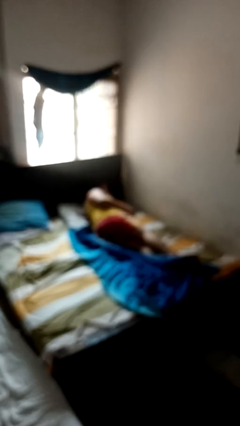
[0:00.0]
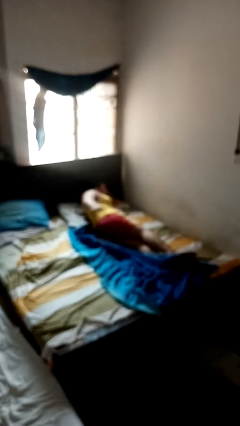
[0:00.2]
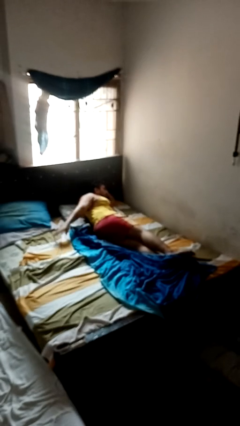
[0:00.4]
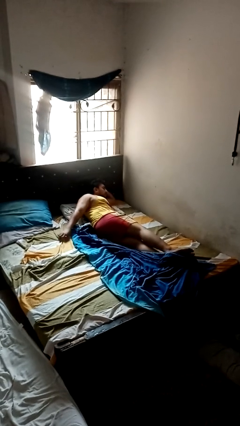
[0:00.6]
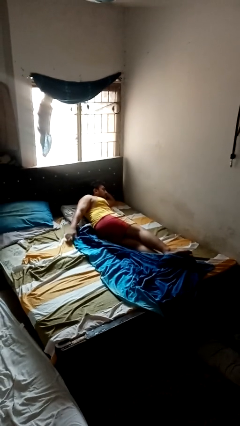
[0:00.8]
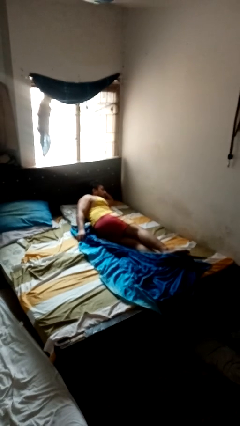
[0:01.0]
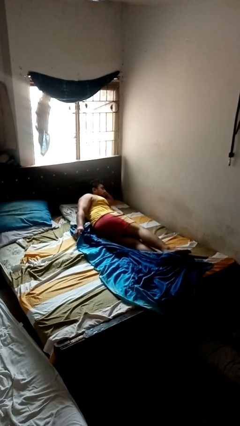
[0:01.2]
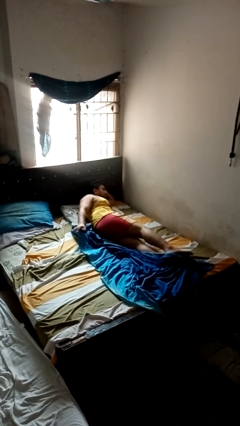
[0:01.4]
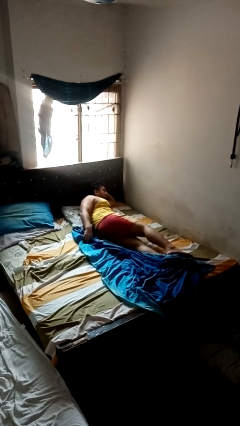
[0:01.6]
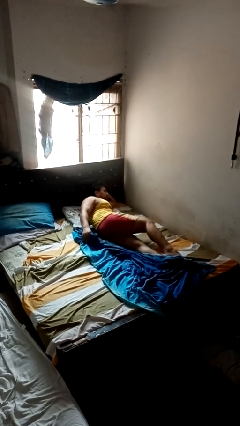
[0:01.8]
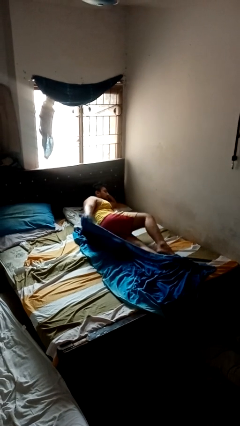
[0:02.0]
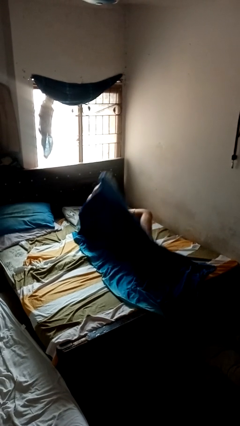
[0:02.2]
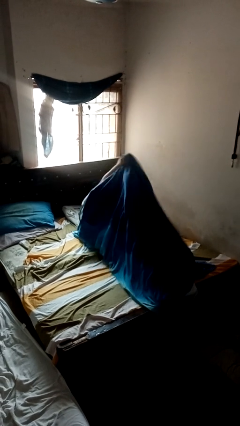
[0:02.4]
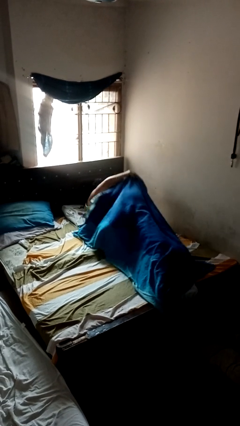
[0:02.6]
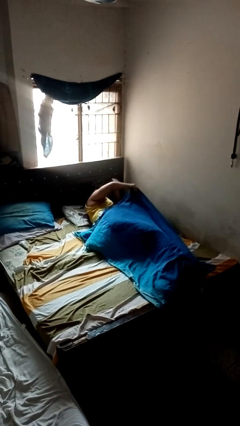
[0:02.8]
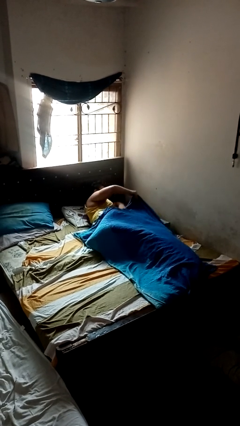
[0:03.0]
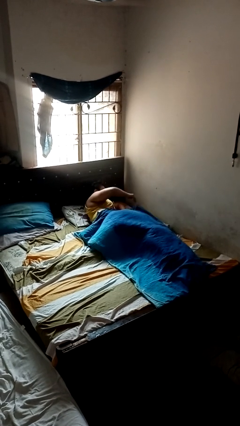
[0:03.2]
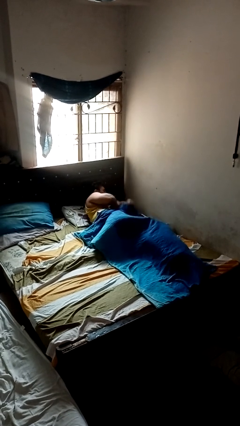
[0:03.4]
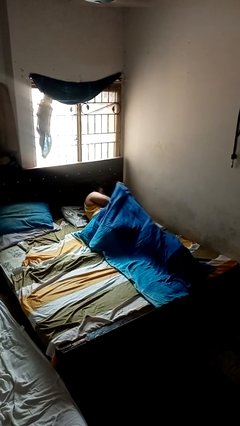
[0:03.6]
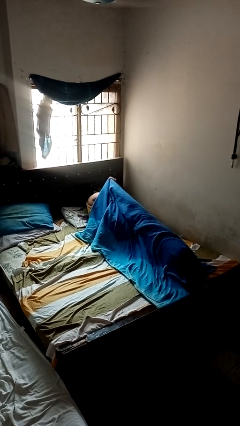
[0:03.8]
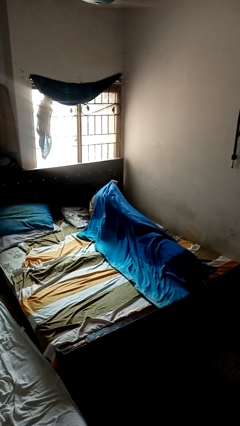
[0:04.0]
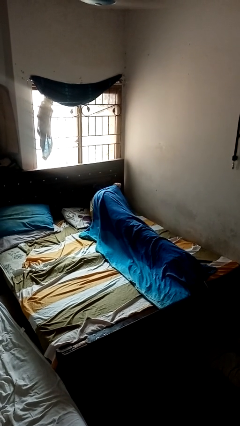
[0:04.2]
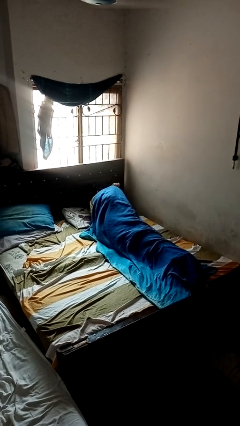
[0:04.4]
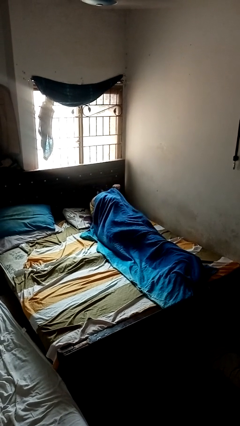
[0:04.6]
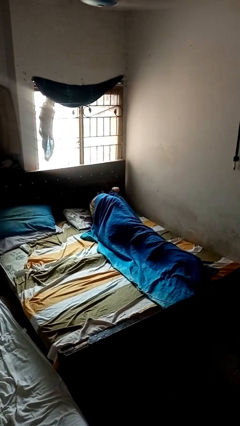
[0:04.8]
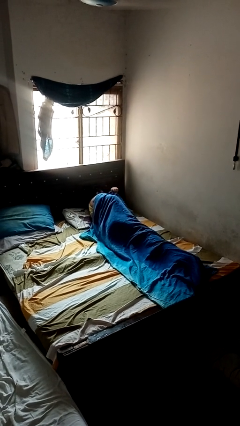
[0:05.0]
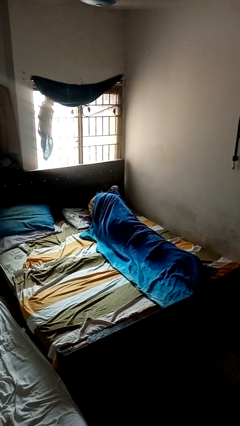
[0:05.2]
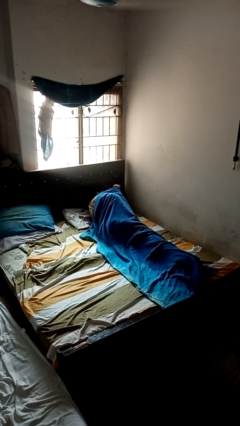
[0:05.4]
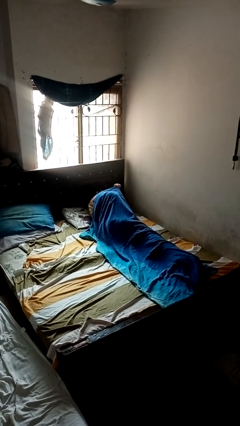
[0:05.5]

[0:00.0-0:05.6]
person covers with blanket

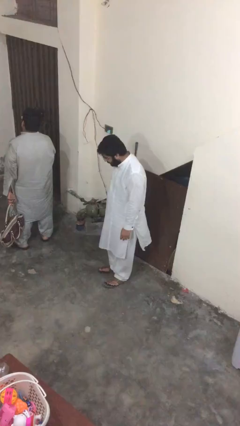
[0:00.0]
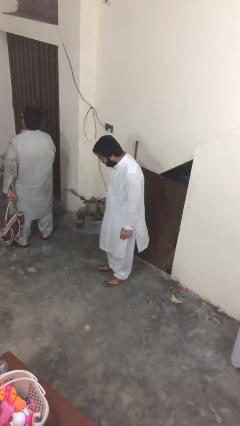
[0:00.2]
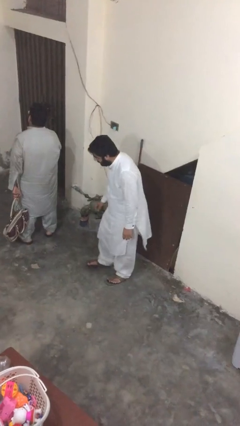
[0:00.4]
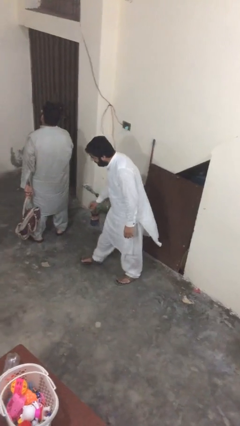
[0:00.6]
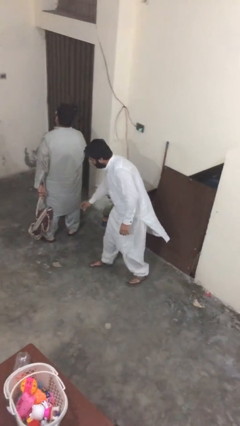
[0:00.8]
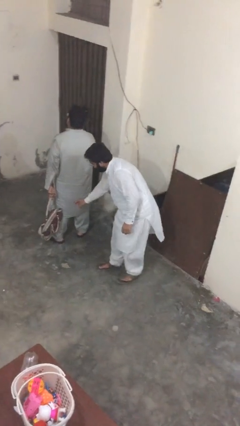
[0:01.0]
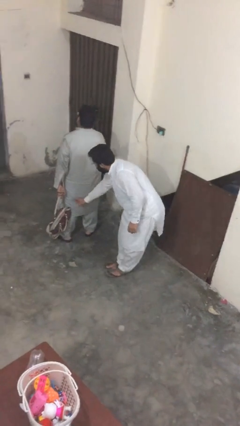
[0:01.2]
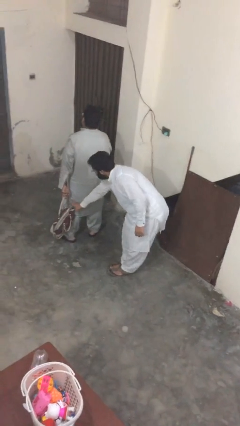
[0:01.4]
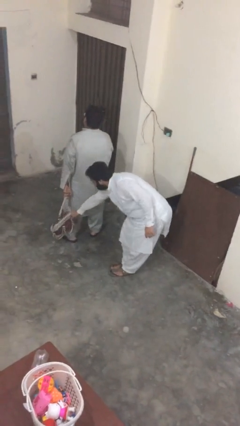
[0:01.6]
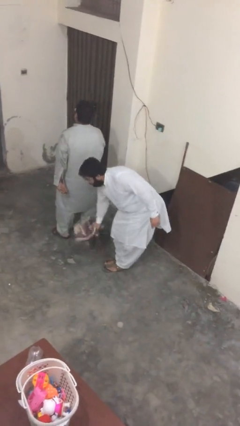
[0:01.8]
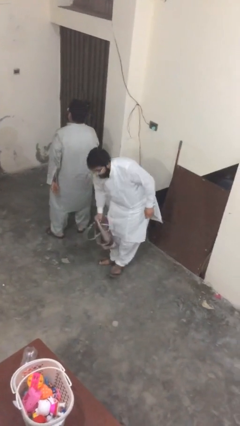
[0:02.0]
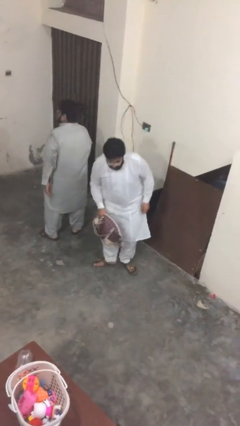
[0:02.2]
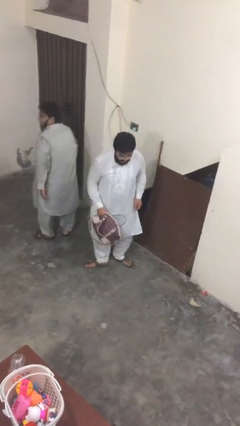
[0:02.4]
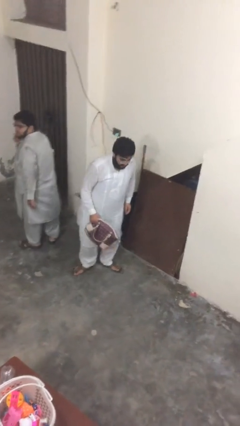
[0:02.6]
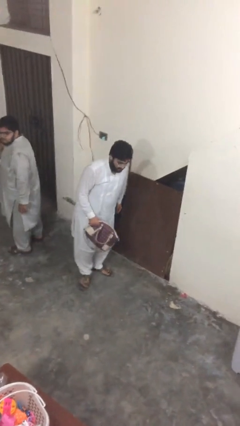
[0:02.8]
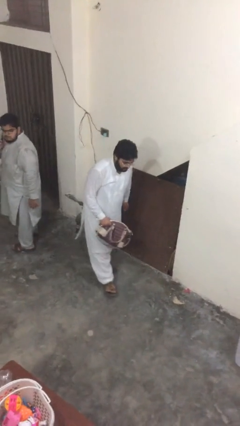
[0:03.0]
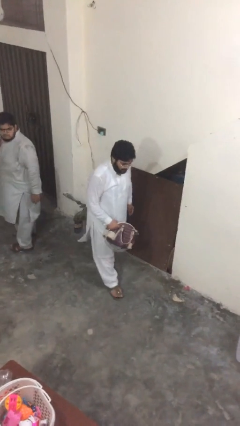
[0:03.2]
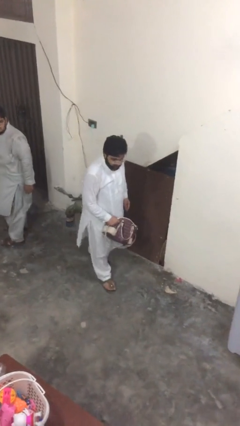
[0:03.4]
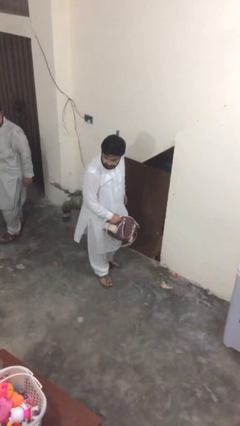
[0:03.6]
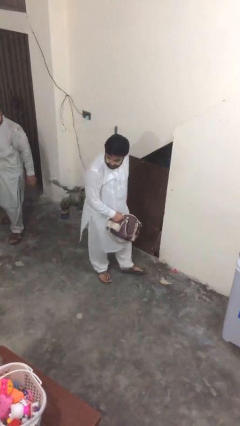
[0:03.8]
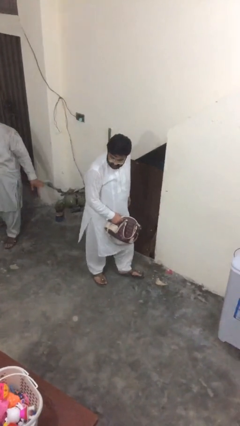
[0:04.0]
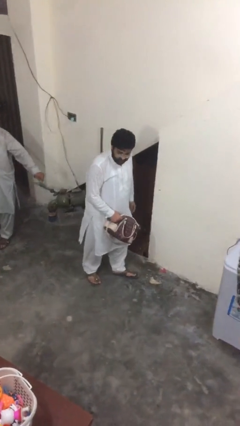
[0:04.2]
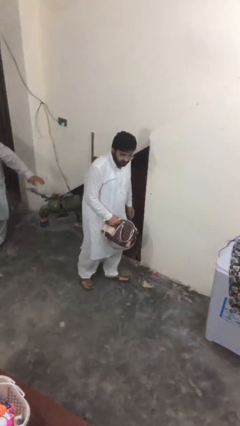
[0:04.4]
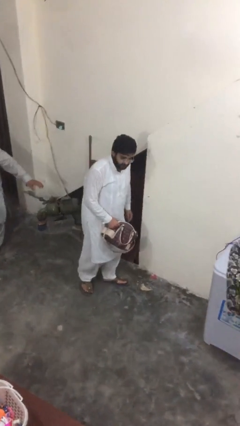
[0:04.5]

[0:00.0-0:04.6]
person steals object from person

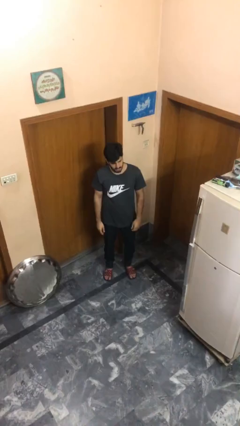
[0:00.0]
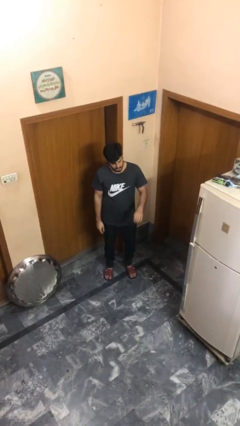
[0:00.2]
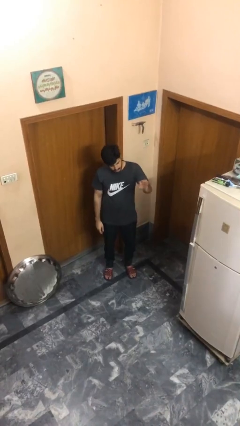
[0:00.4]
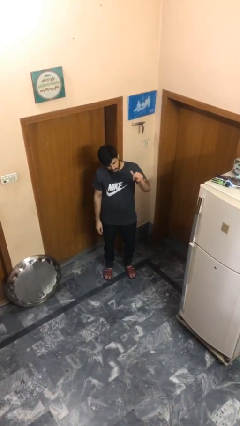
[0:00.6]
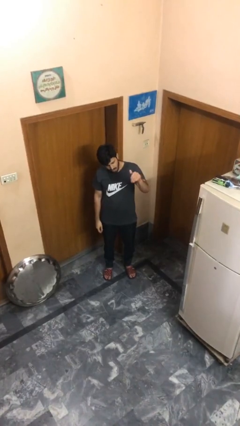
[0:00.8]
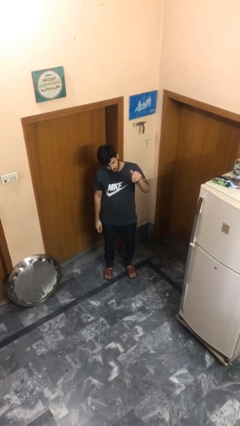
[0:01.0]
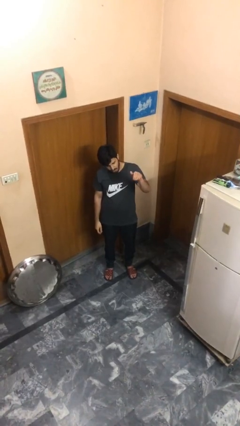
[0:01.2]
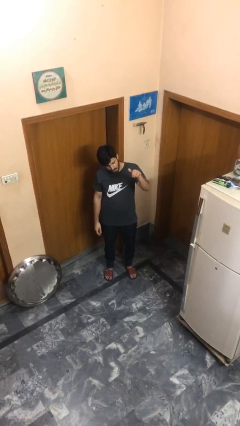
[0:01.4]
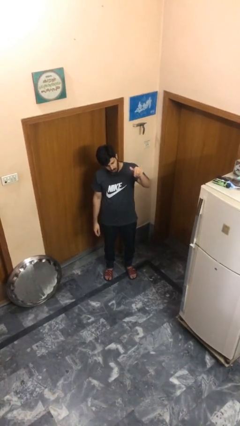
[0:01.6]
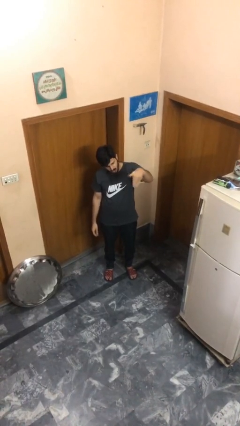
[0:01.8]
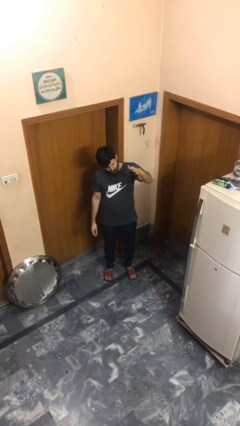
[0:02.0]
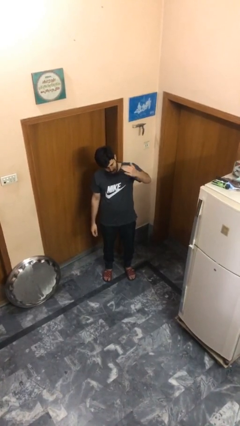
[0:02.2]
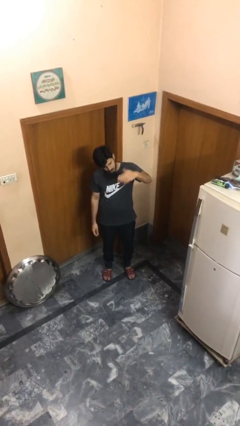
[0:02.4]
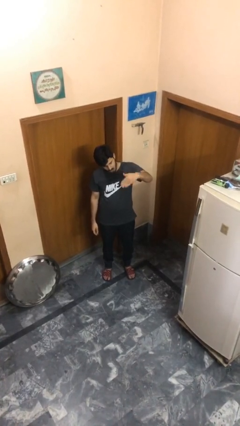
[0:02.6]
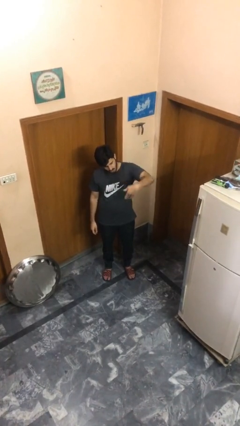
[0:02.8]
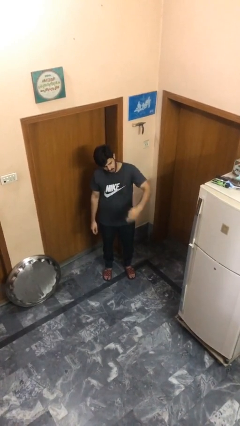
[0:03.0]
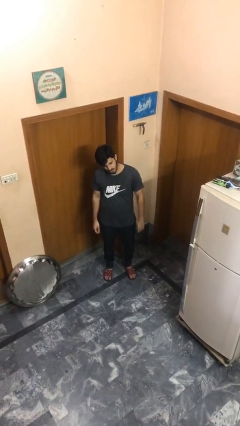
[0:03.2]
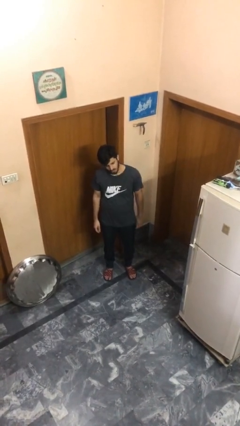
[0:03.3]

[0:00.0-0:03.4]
person gestures come here

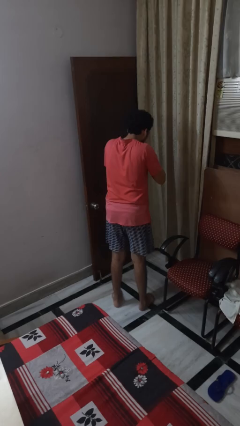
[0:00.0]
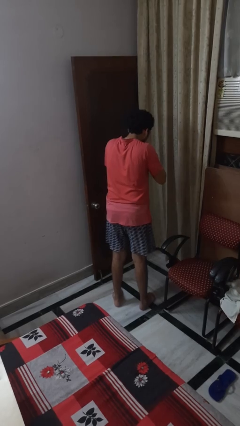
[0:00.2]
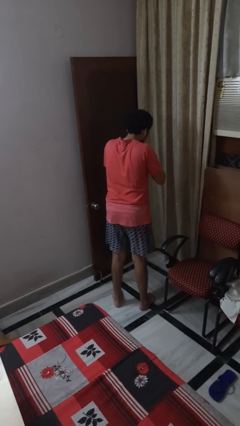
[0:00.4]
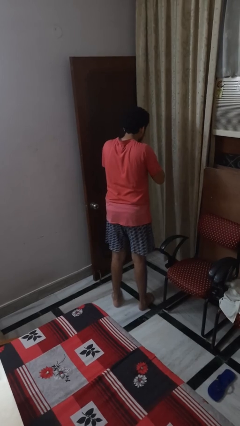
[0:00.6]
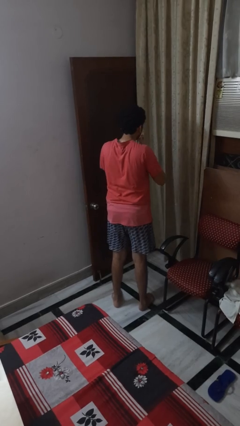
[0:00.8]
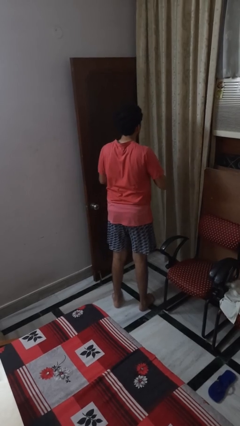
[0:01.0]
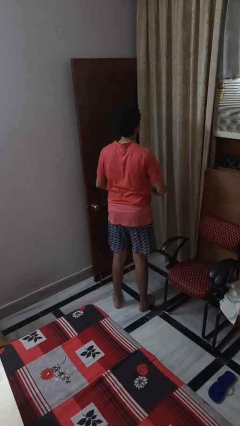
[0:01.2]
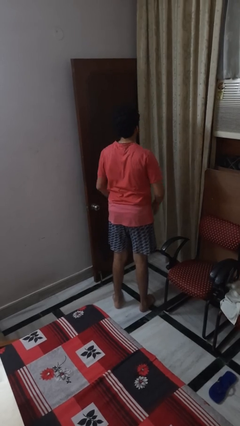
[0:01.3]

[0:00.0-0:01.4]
person sneezes into hand

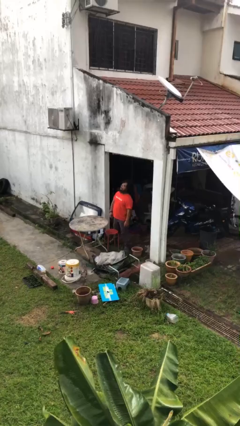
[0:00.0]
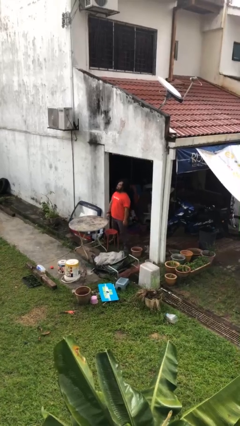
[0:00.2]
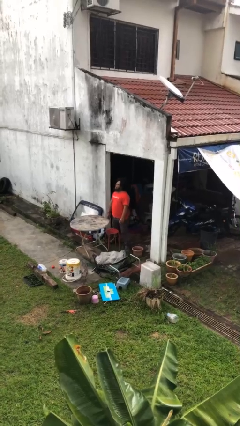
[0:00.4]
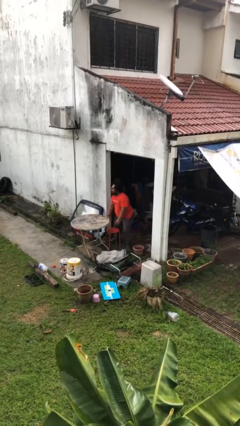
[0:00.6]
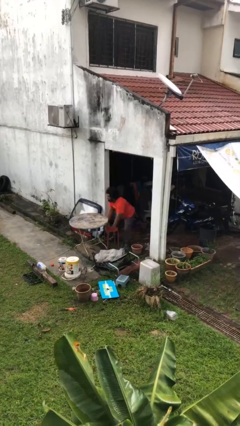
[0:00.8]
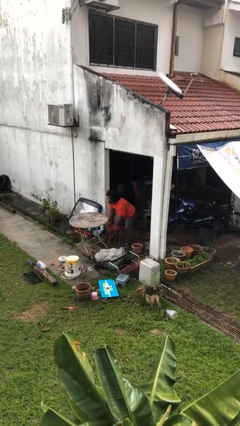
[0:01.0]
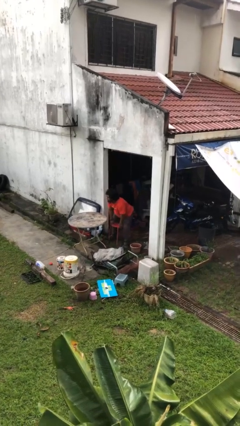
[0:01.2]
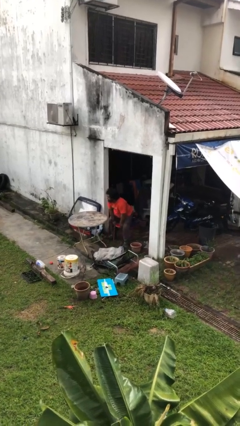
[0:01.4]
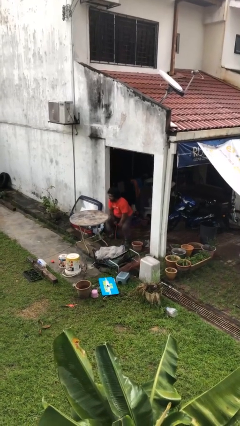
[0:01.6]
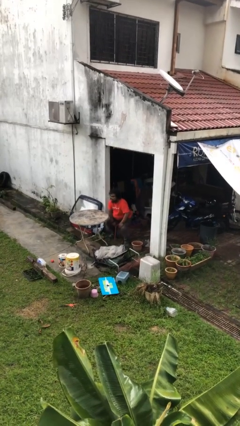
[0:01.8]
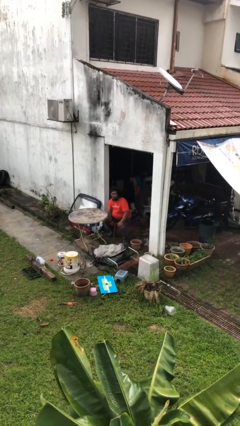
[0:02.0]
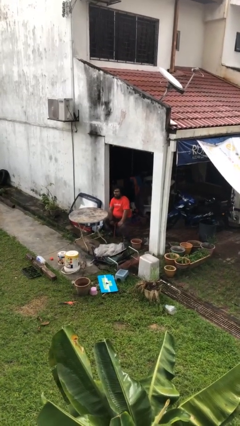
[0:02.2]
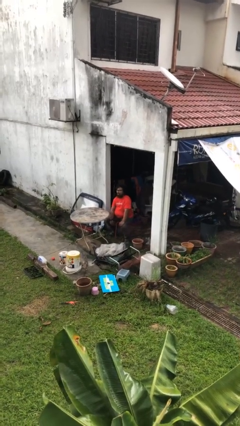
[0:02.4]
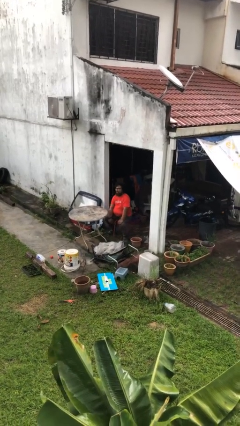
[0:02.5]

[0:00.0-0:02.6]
person sits down
